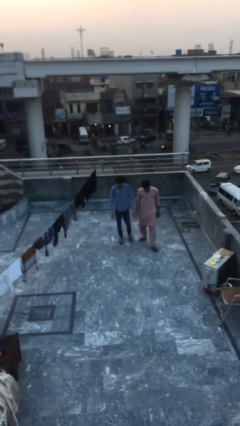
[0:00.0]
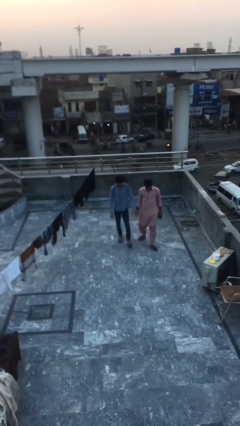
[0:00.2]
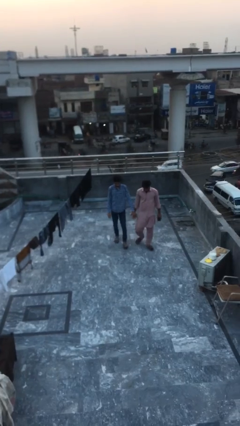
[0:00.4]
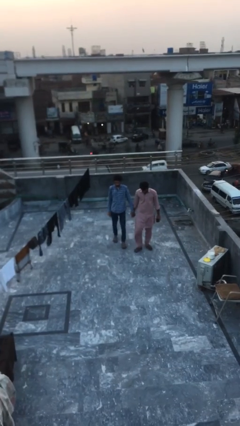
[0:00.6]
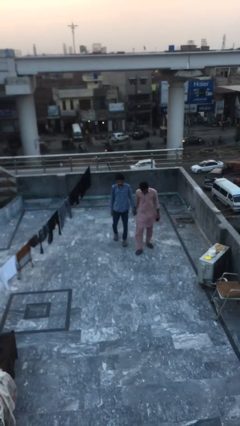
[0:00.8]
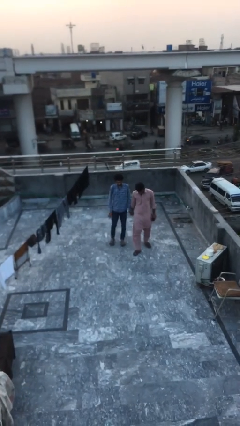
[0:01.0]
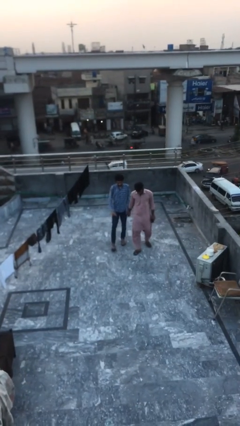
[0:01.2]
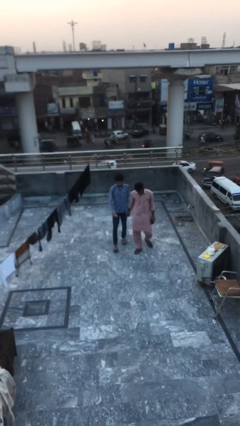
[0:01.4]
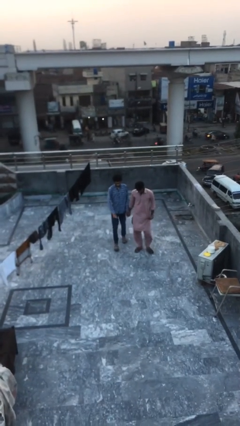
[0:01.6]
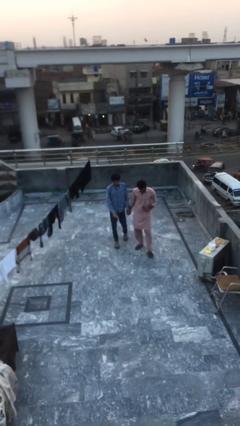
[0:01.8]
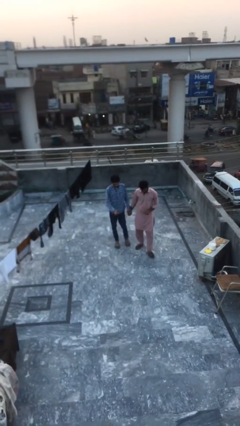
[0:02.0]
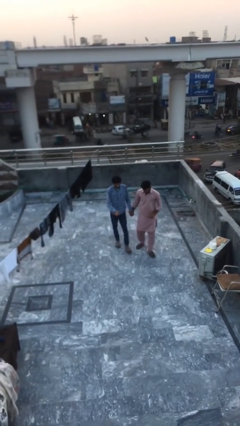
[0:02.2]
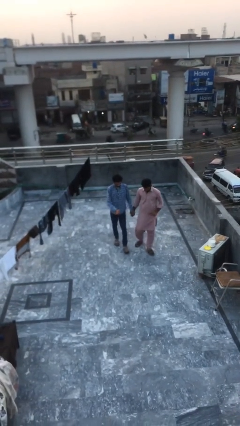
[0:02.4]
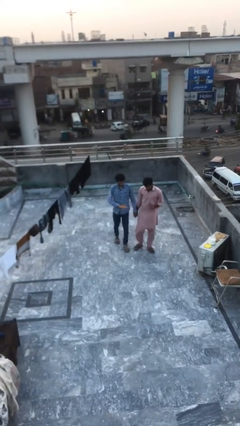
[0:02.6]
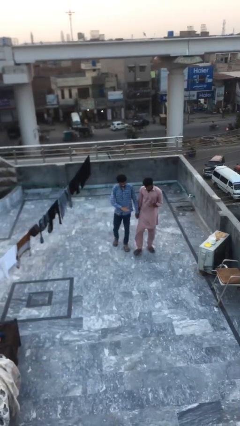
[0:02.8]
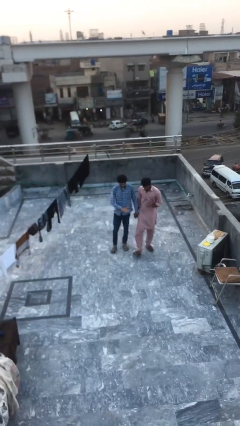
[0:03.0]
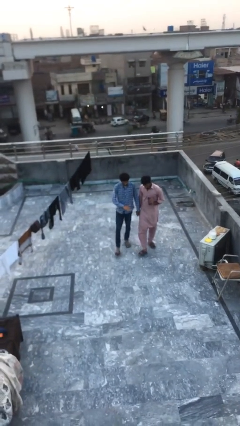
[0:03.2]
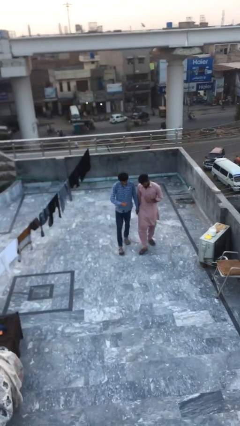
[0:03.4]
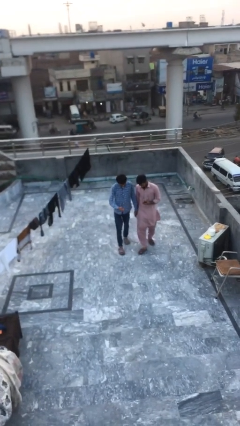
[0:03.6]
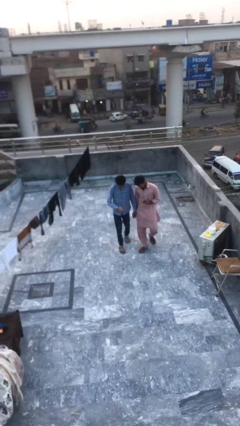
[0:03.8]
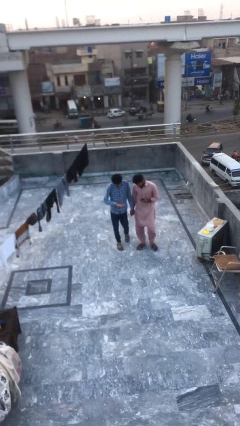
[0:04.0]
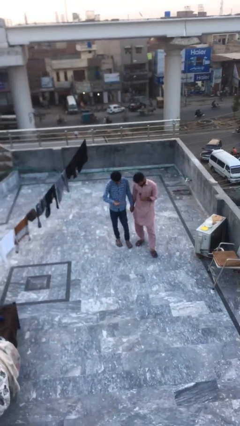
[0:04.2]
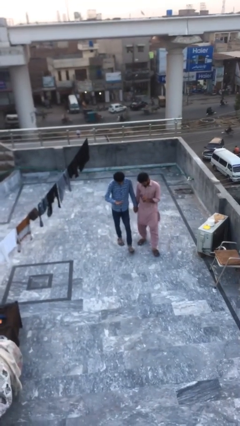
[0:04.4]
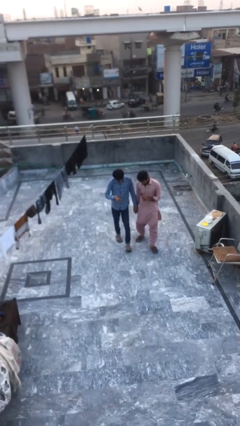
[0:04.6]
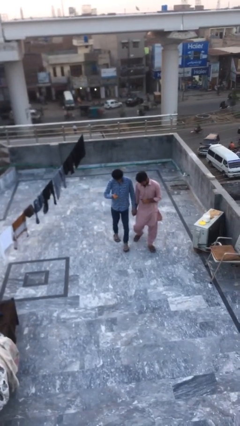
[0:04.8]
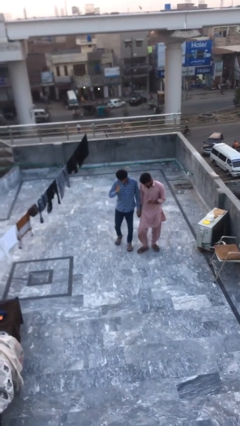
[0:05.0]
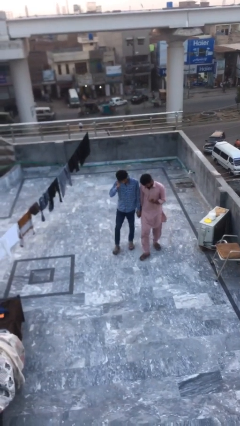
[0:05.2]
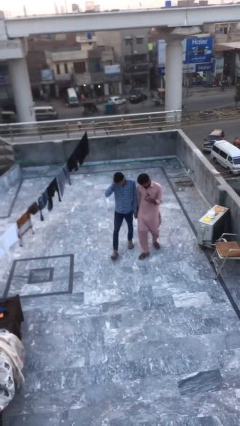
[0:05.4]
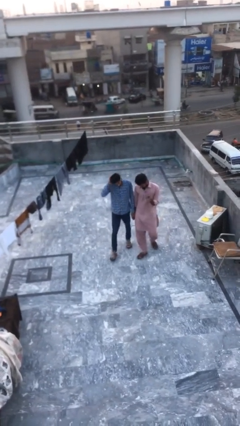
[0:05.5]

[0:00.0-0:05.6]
person holds hand

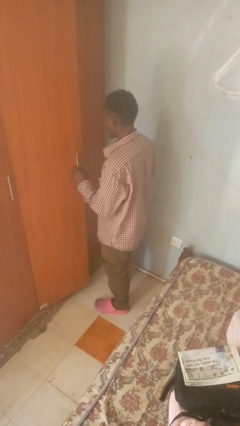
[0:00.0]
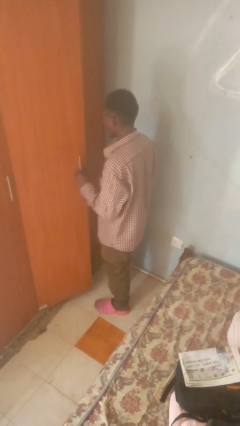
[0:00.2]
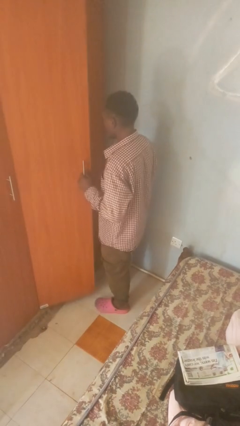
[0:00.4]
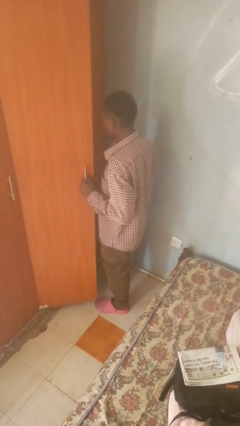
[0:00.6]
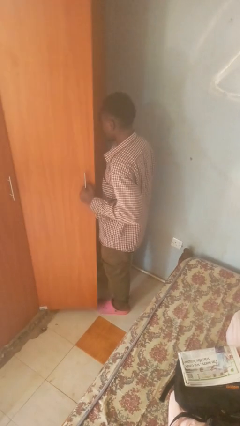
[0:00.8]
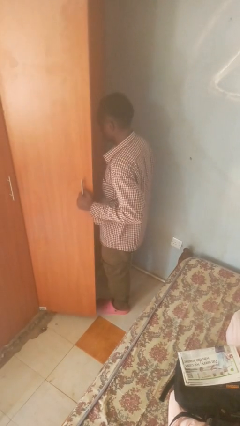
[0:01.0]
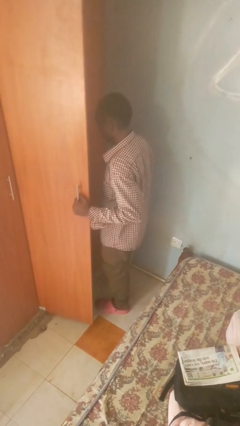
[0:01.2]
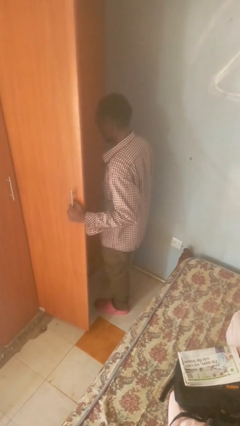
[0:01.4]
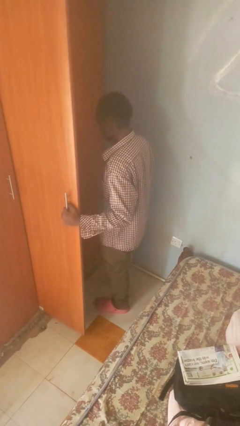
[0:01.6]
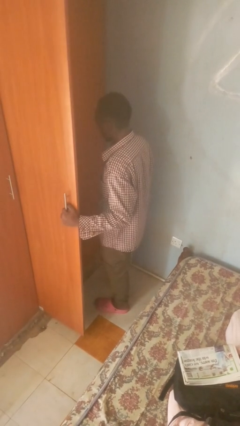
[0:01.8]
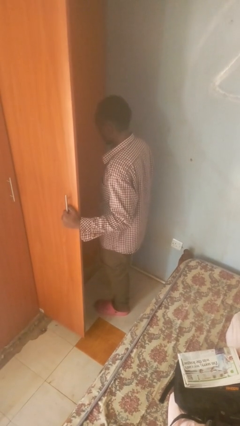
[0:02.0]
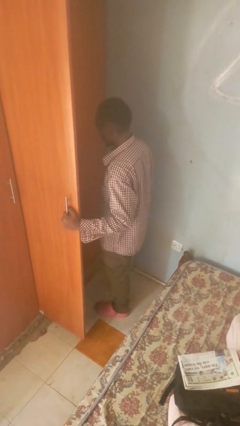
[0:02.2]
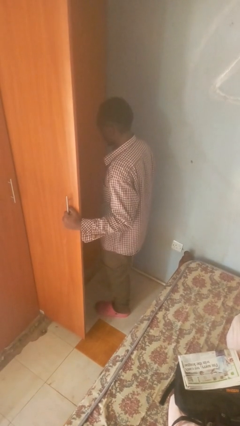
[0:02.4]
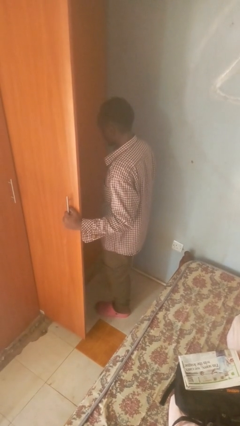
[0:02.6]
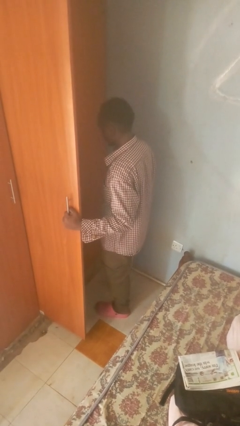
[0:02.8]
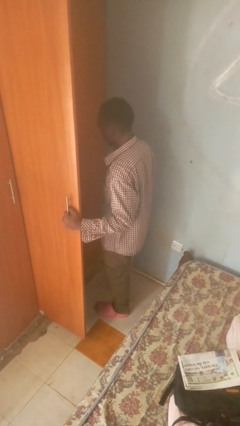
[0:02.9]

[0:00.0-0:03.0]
person opens closet door

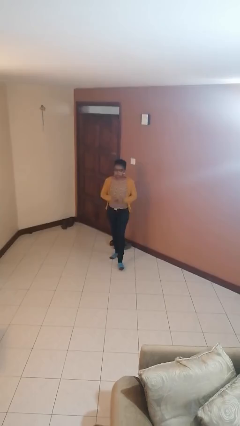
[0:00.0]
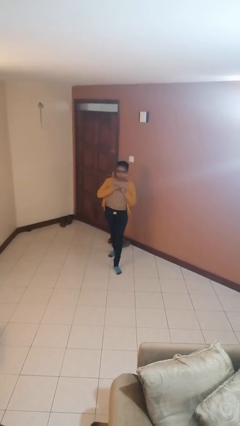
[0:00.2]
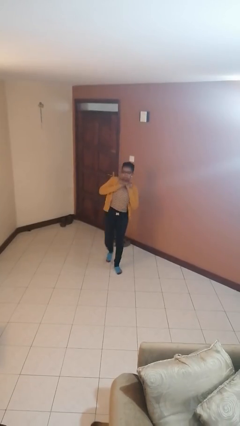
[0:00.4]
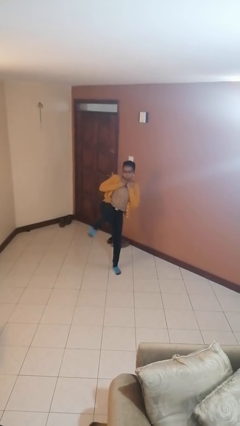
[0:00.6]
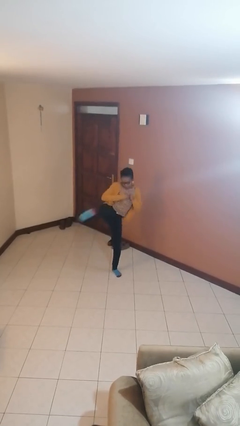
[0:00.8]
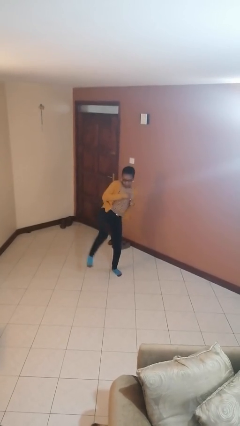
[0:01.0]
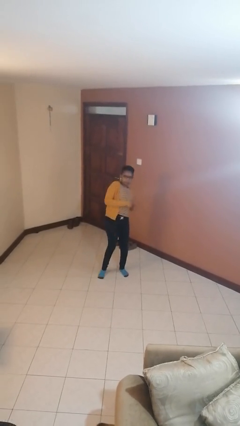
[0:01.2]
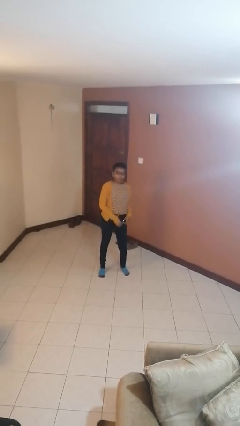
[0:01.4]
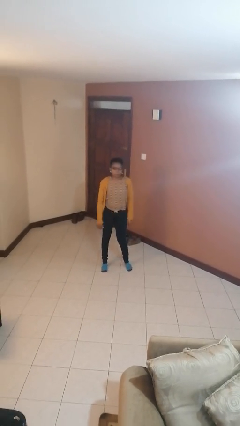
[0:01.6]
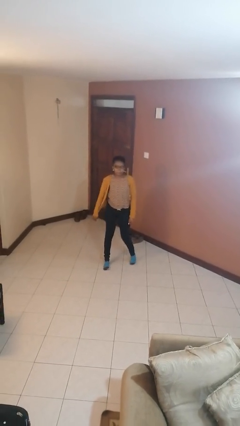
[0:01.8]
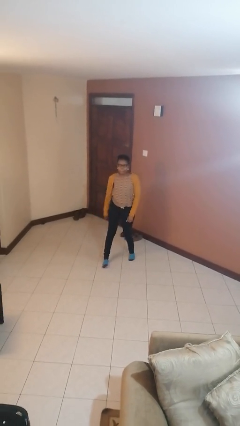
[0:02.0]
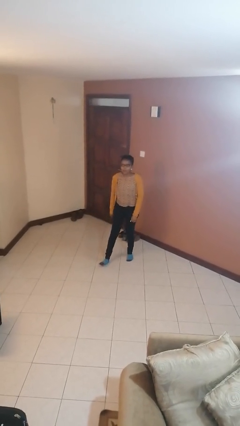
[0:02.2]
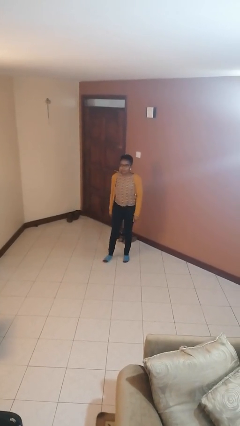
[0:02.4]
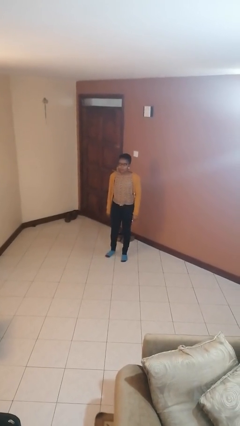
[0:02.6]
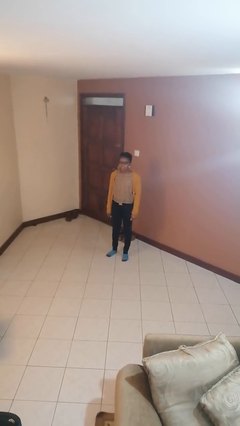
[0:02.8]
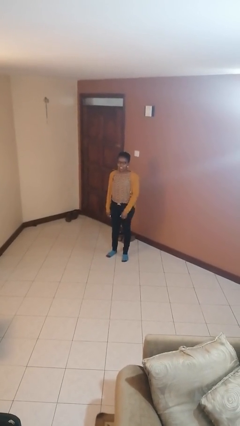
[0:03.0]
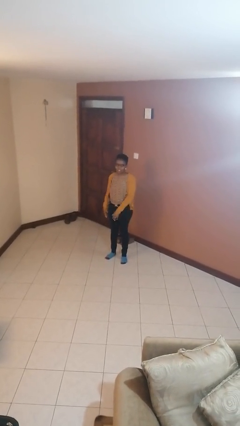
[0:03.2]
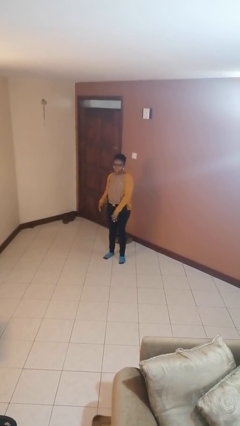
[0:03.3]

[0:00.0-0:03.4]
person karate kicks

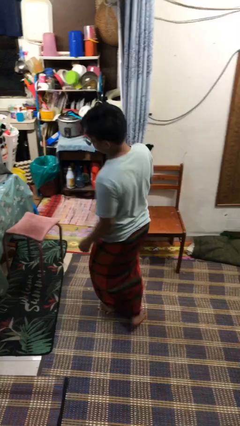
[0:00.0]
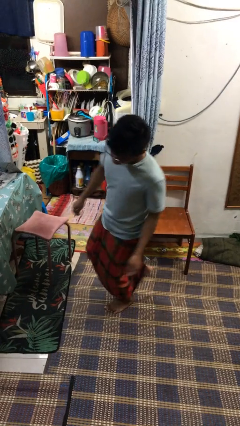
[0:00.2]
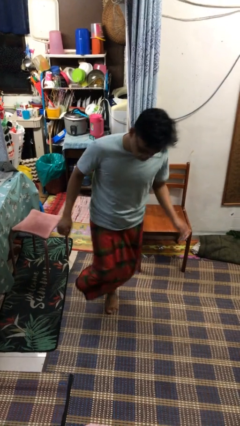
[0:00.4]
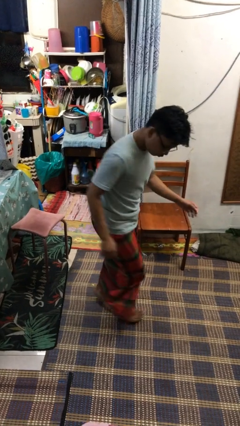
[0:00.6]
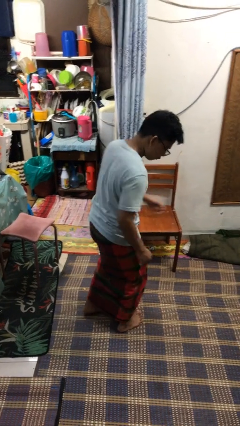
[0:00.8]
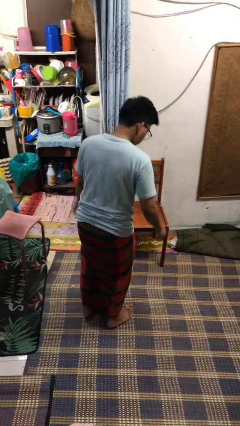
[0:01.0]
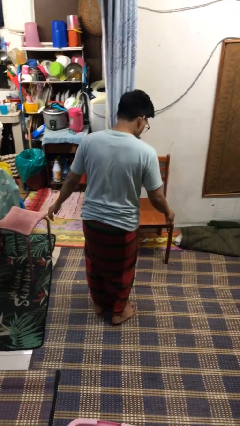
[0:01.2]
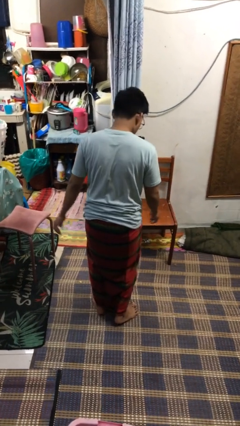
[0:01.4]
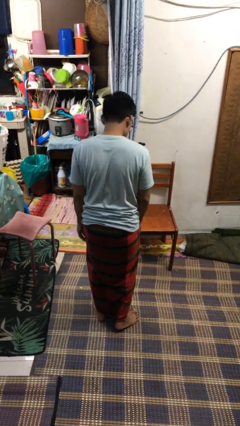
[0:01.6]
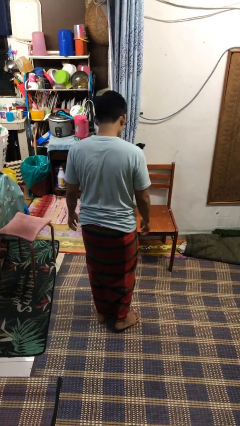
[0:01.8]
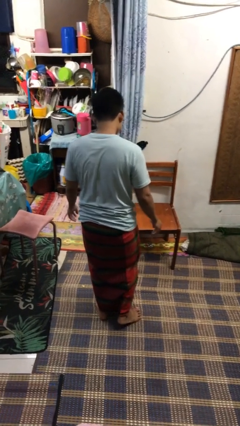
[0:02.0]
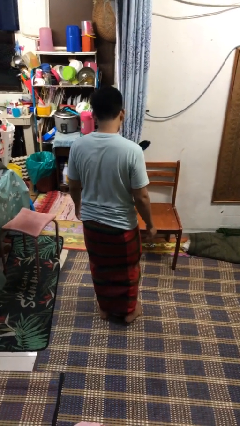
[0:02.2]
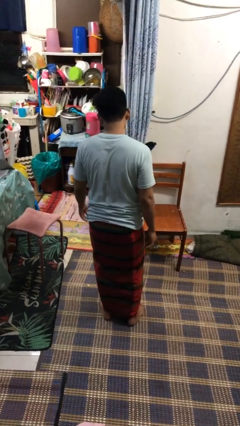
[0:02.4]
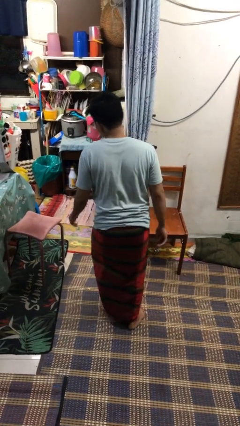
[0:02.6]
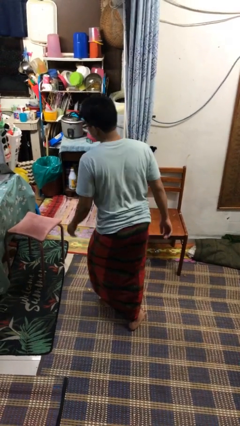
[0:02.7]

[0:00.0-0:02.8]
person twirls

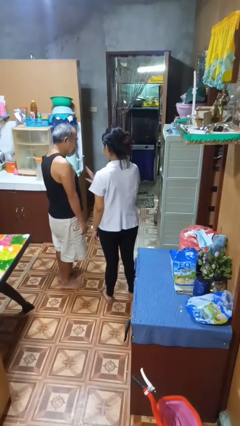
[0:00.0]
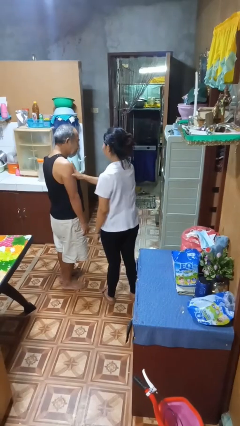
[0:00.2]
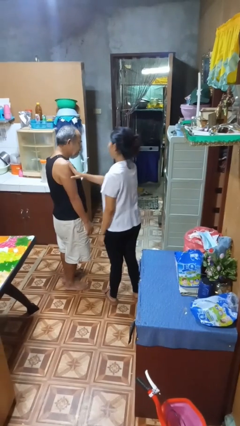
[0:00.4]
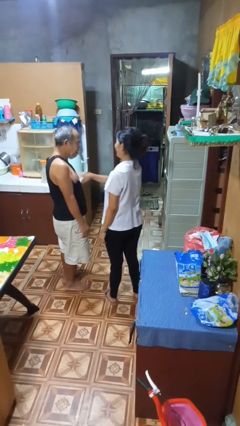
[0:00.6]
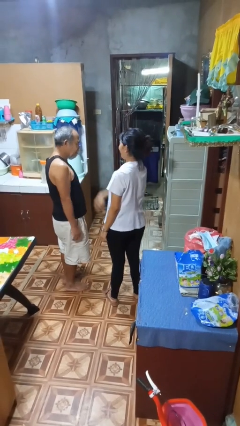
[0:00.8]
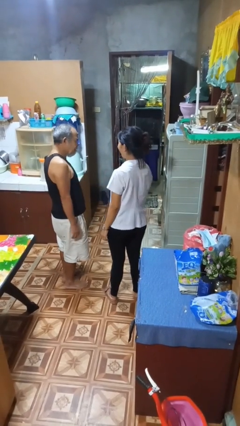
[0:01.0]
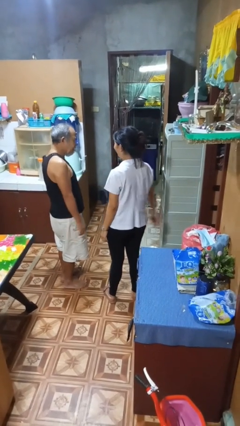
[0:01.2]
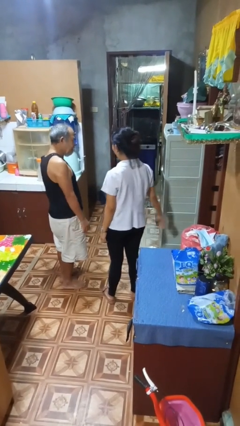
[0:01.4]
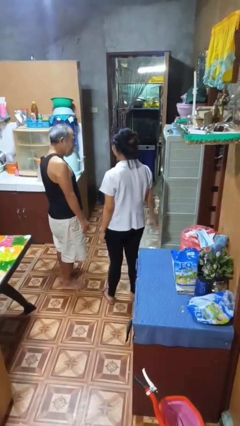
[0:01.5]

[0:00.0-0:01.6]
person shoves person

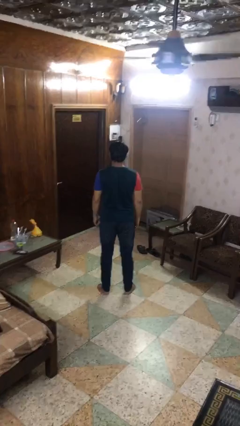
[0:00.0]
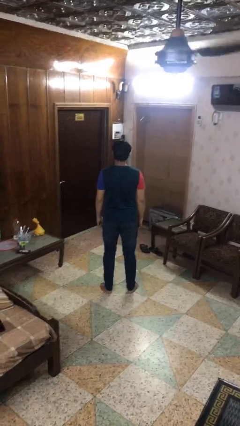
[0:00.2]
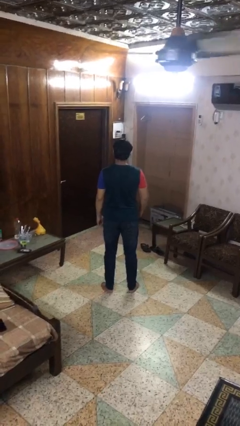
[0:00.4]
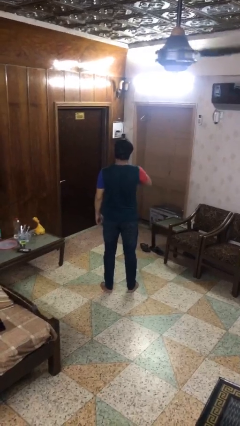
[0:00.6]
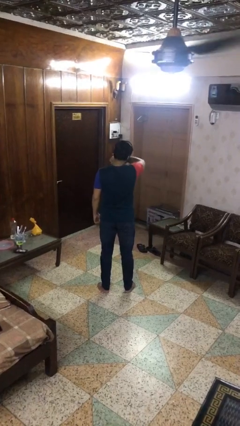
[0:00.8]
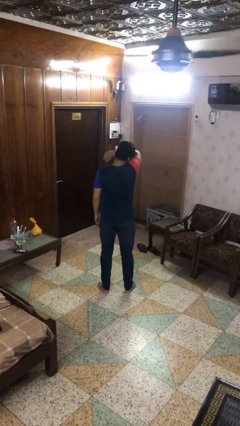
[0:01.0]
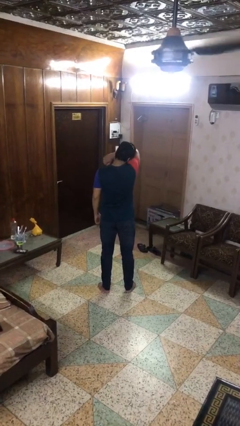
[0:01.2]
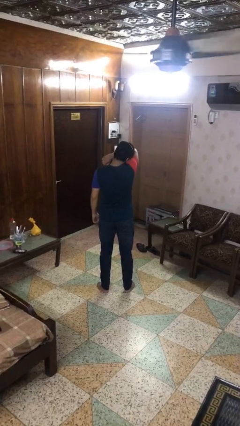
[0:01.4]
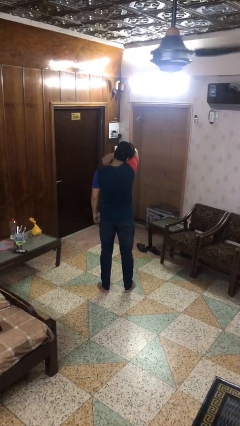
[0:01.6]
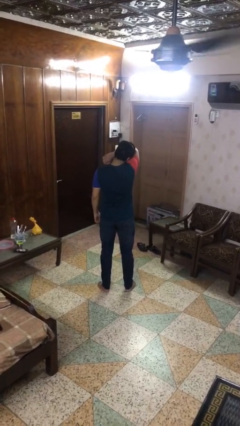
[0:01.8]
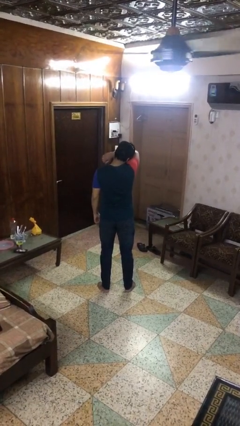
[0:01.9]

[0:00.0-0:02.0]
person sneezes into arm
